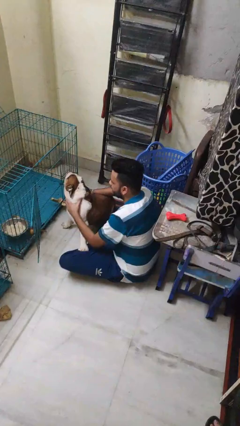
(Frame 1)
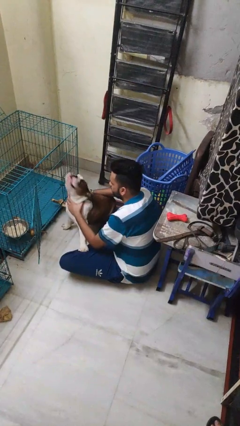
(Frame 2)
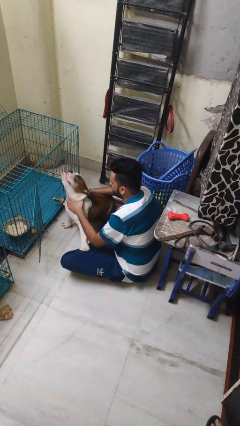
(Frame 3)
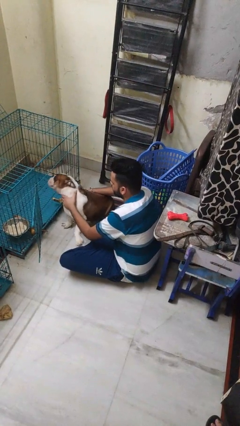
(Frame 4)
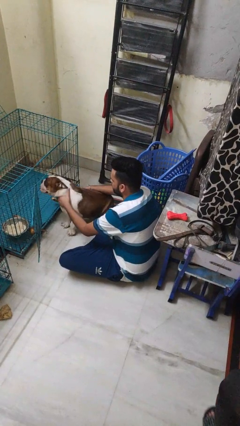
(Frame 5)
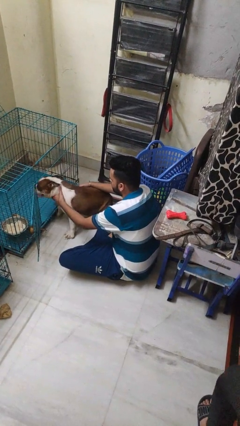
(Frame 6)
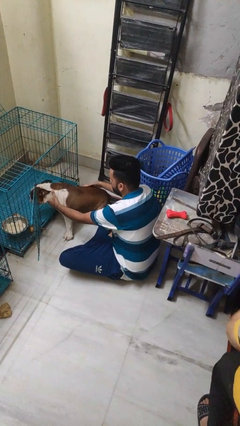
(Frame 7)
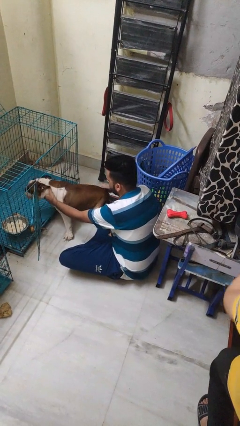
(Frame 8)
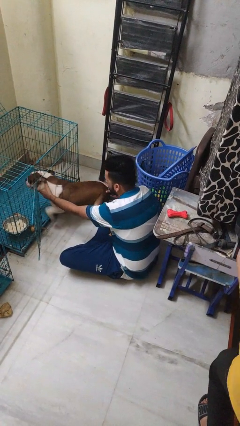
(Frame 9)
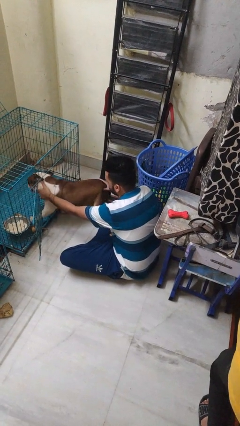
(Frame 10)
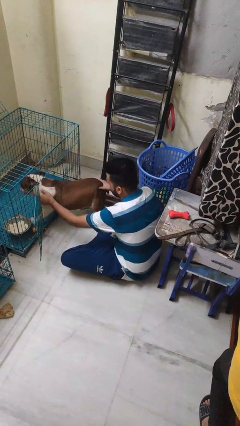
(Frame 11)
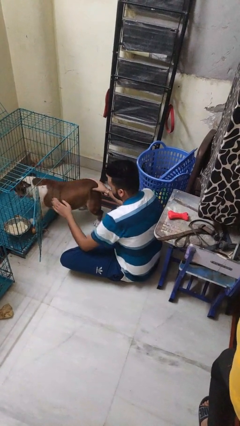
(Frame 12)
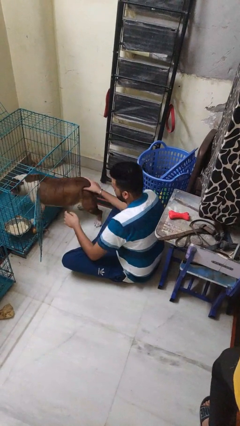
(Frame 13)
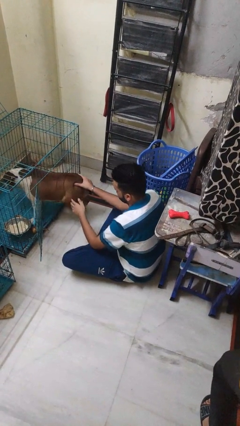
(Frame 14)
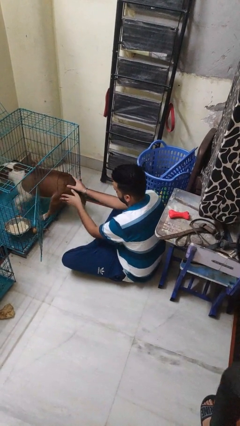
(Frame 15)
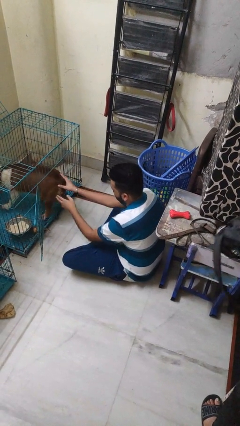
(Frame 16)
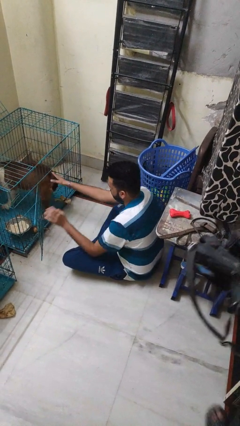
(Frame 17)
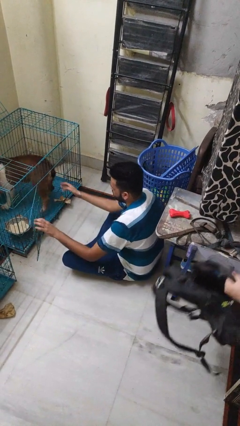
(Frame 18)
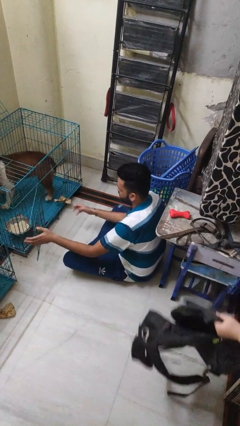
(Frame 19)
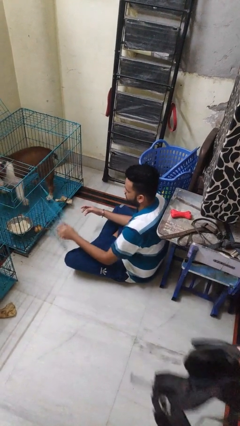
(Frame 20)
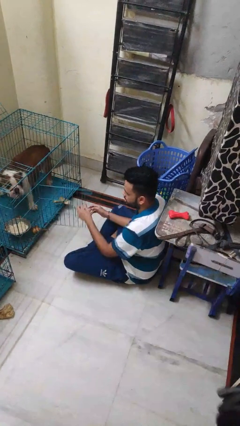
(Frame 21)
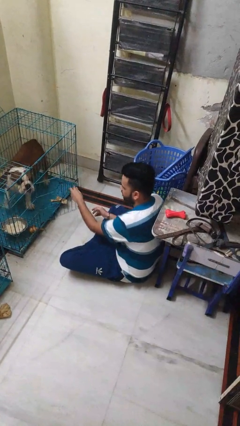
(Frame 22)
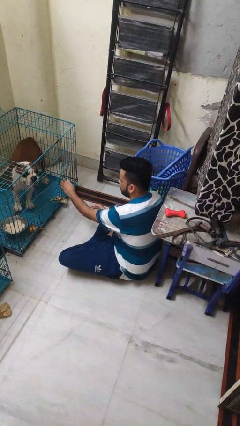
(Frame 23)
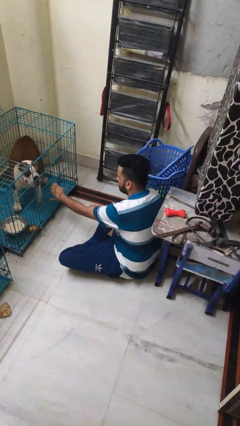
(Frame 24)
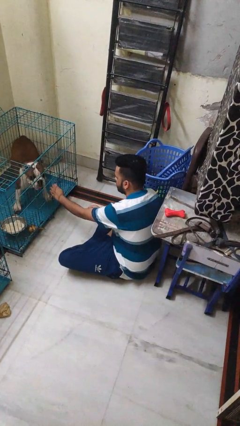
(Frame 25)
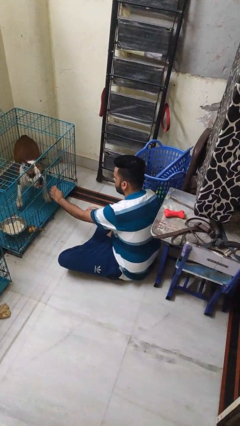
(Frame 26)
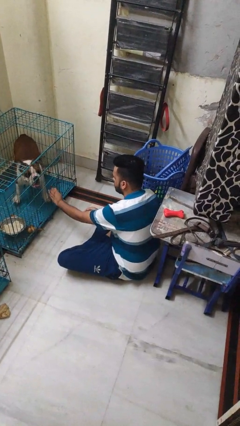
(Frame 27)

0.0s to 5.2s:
person crates dog

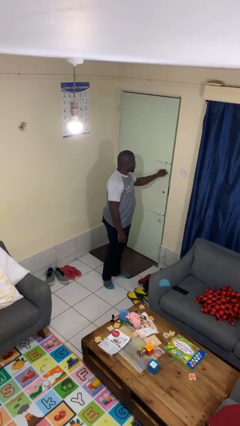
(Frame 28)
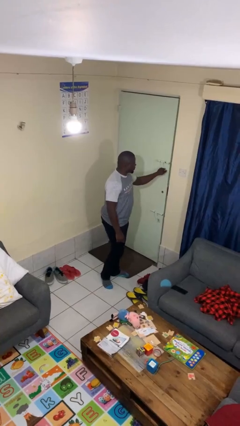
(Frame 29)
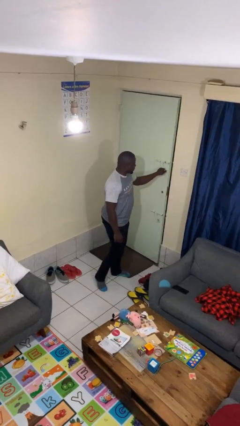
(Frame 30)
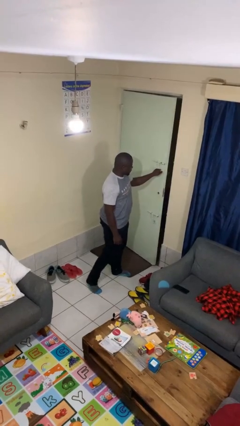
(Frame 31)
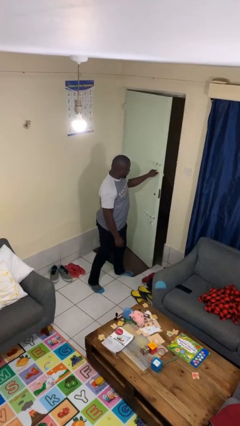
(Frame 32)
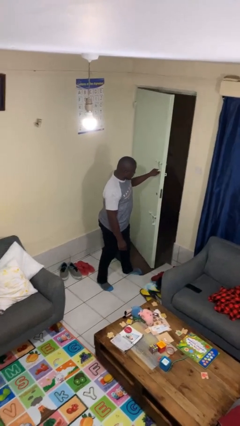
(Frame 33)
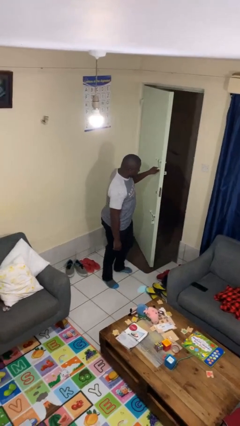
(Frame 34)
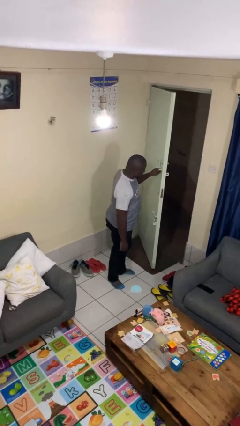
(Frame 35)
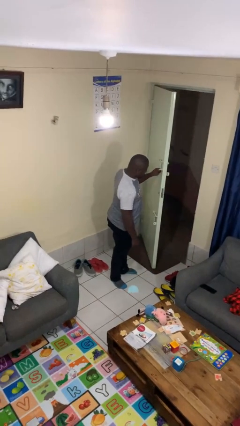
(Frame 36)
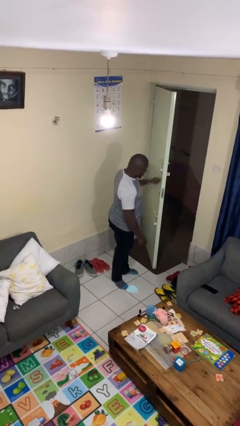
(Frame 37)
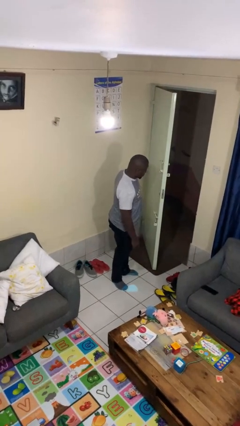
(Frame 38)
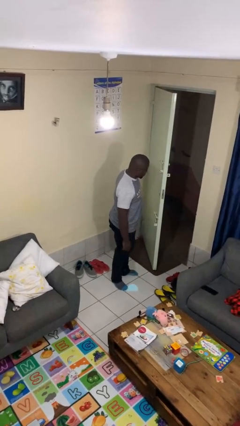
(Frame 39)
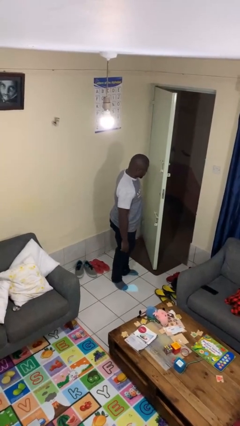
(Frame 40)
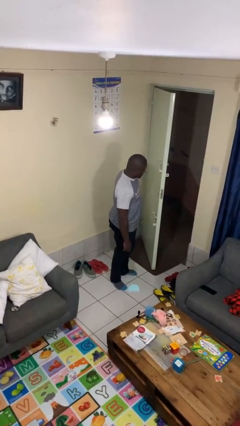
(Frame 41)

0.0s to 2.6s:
person opens facility door

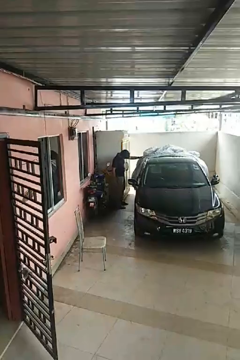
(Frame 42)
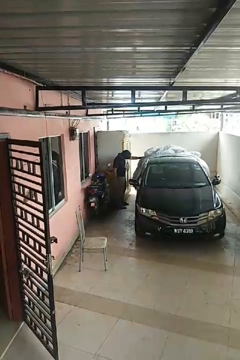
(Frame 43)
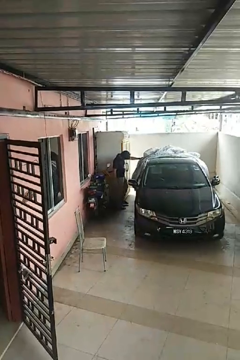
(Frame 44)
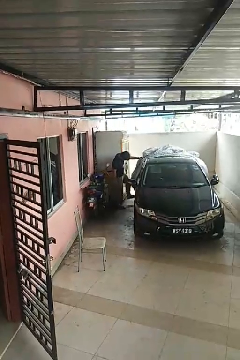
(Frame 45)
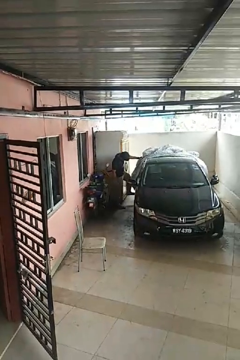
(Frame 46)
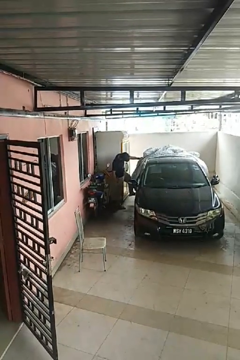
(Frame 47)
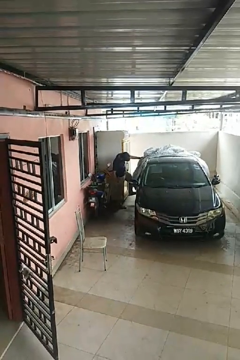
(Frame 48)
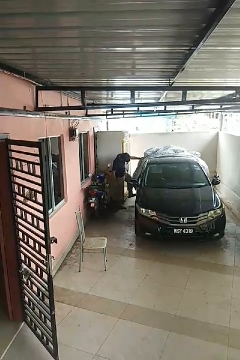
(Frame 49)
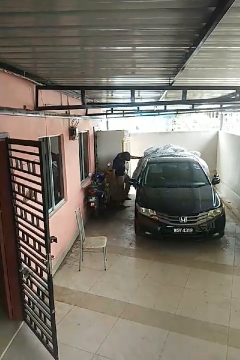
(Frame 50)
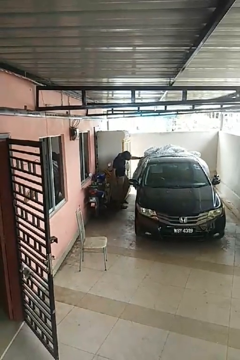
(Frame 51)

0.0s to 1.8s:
person kicks car tires

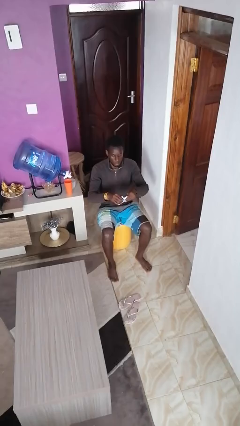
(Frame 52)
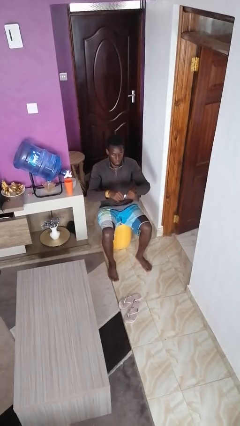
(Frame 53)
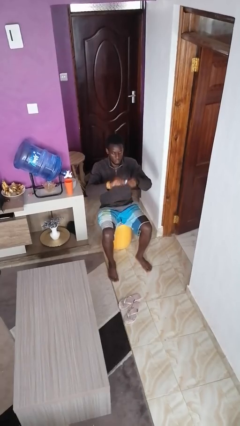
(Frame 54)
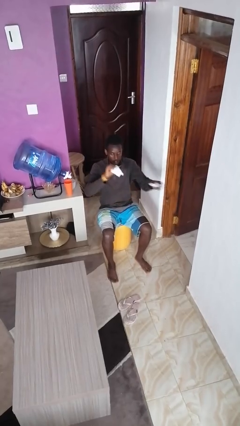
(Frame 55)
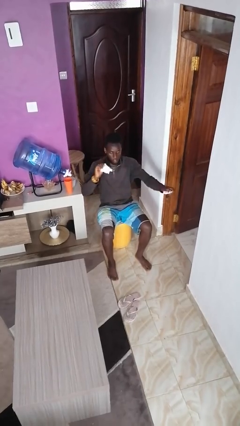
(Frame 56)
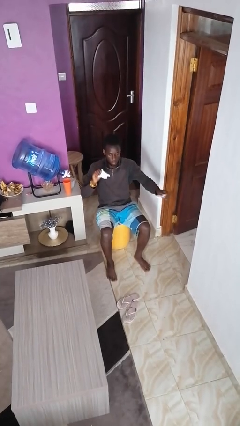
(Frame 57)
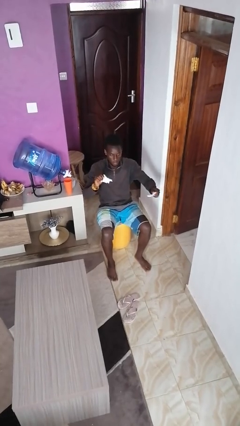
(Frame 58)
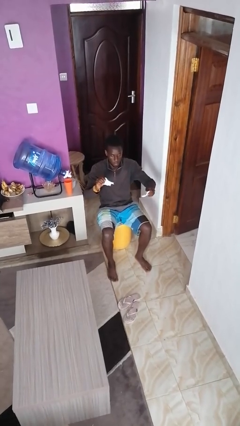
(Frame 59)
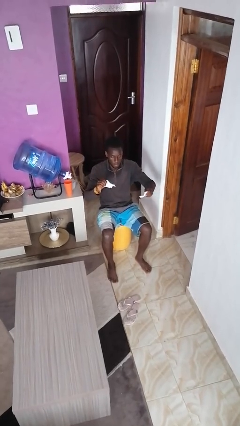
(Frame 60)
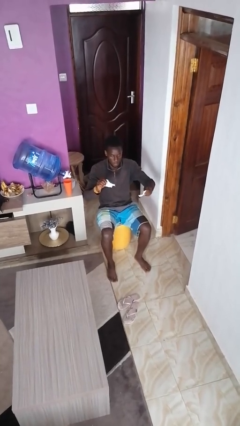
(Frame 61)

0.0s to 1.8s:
person tears paper

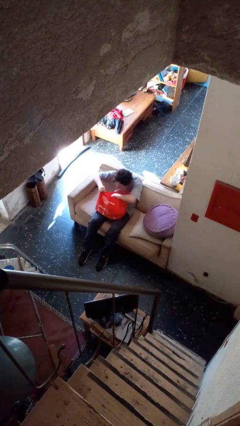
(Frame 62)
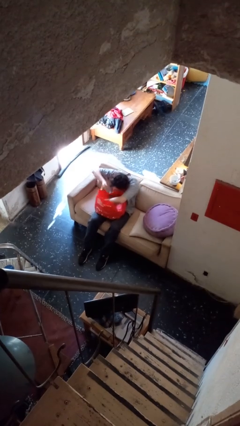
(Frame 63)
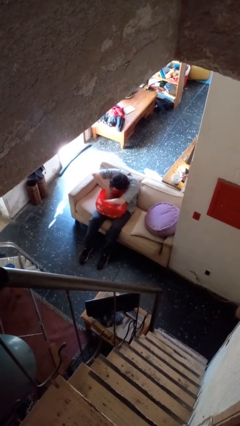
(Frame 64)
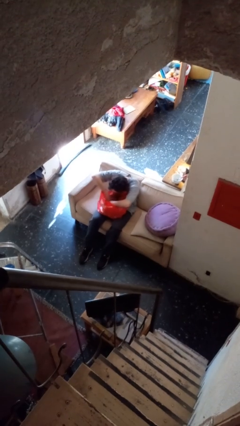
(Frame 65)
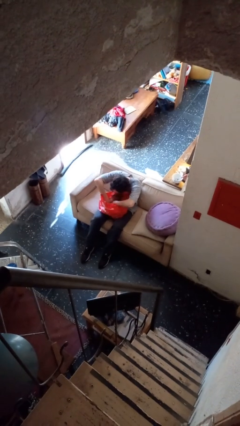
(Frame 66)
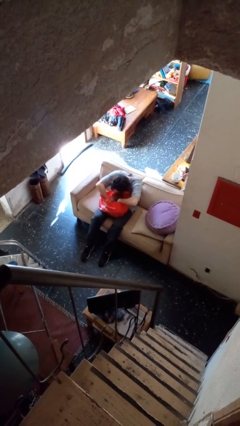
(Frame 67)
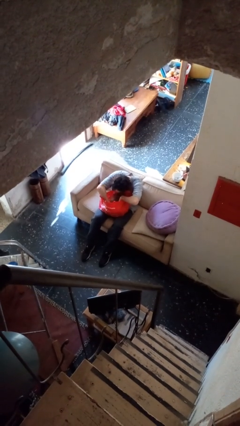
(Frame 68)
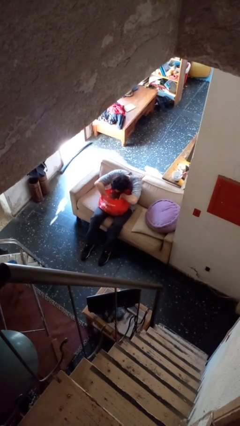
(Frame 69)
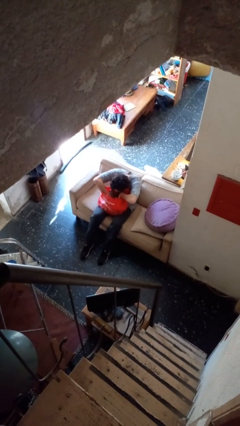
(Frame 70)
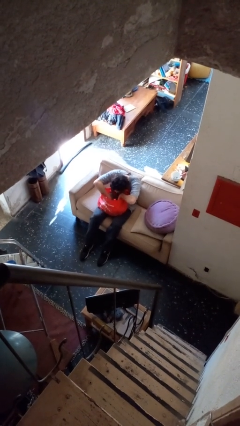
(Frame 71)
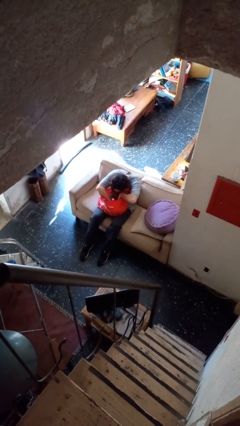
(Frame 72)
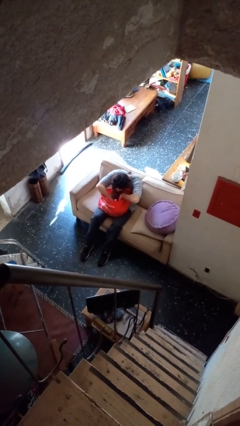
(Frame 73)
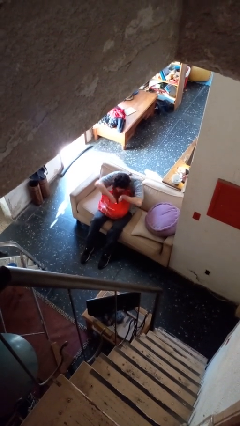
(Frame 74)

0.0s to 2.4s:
person searches in bag

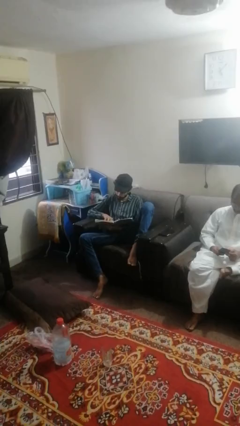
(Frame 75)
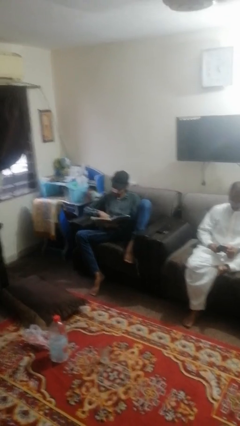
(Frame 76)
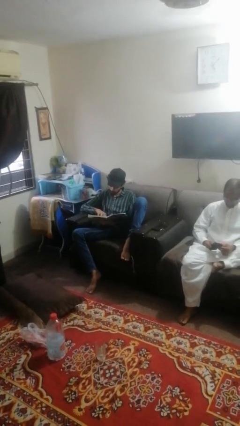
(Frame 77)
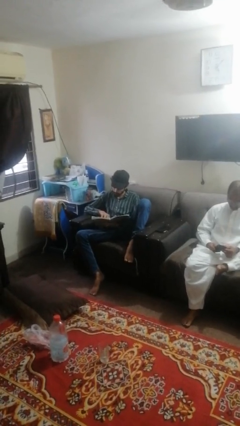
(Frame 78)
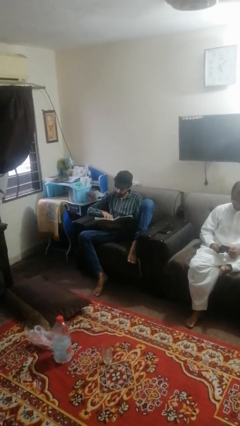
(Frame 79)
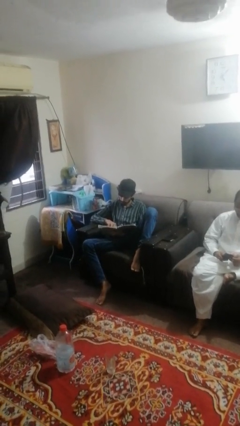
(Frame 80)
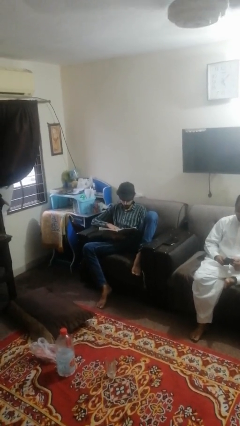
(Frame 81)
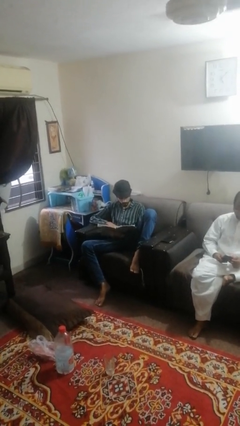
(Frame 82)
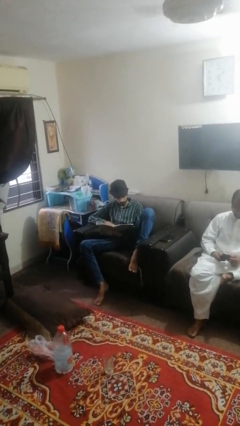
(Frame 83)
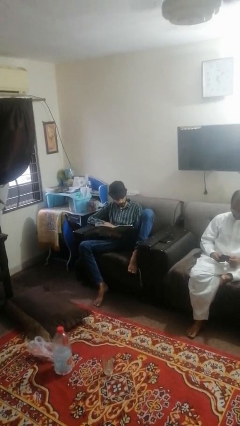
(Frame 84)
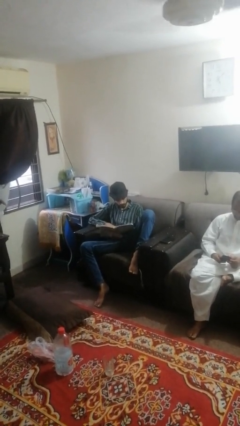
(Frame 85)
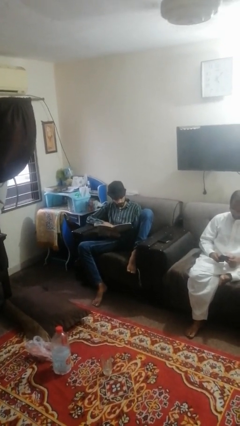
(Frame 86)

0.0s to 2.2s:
person reads magazine

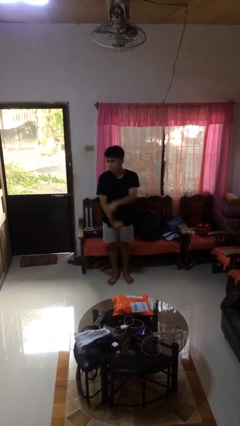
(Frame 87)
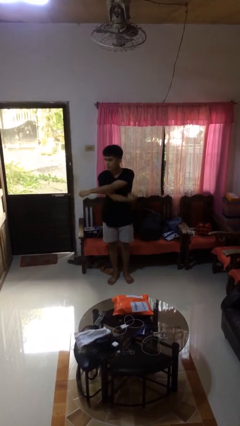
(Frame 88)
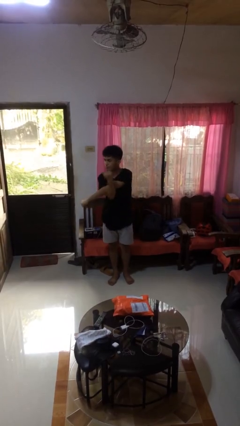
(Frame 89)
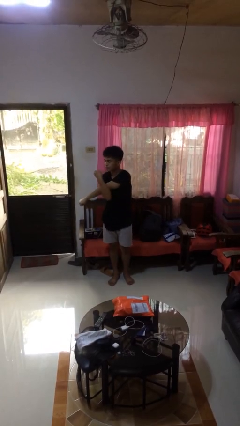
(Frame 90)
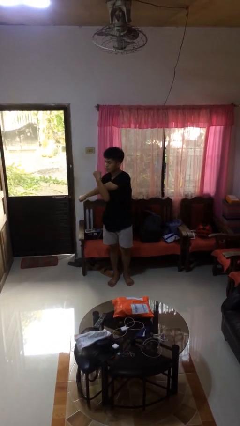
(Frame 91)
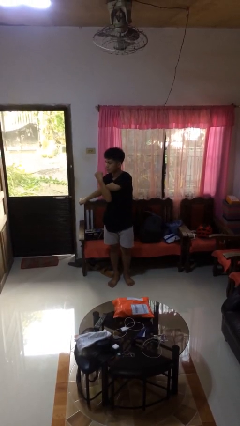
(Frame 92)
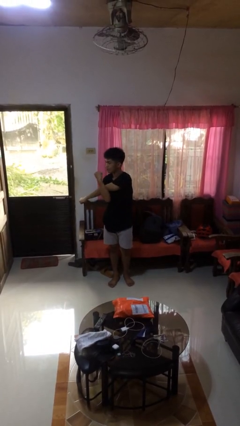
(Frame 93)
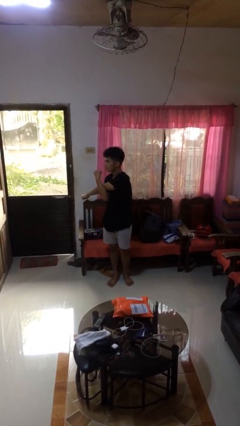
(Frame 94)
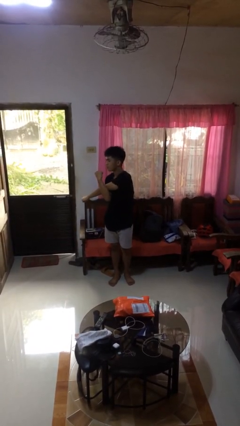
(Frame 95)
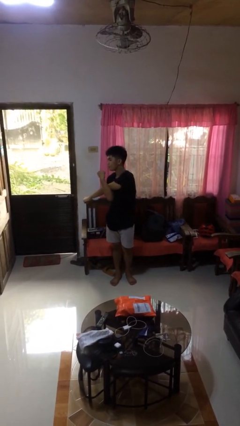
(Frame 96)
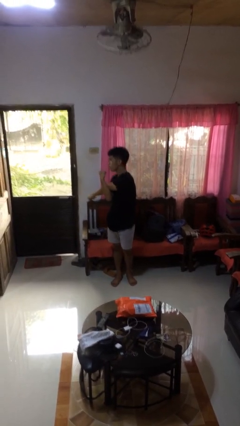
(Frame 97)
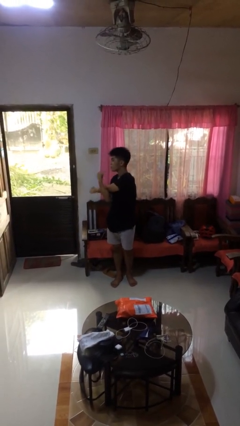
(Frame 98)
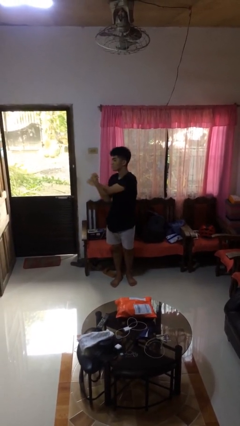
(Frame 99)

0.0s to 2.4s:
person stretches arms to side
